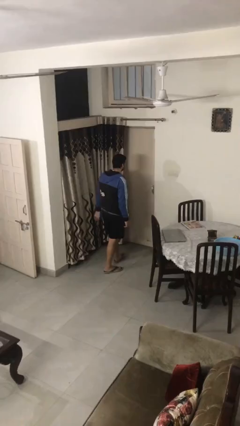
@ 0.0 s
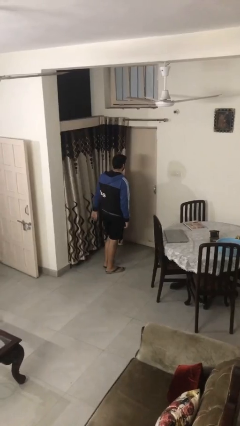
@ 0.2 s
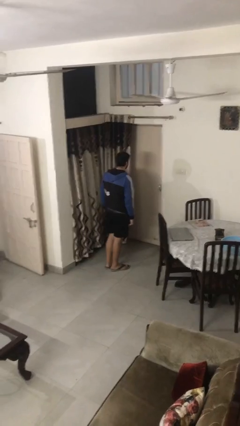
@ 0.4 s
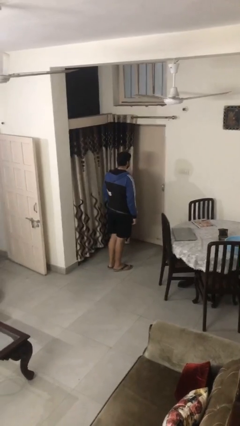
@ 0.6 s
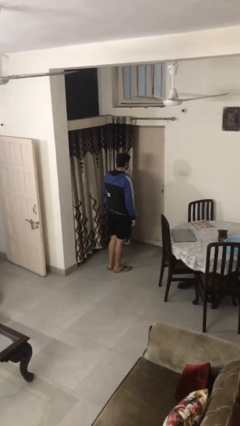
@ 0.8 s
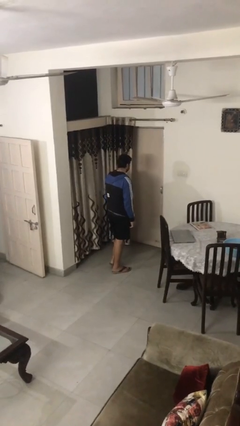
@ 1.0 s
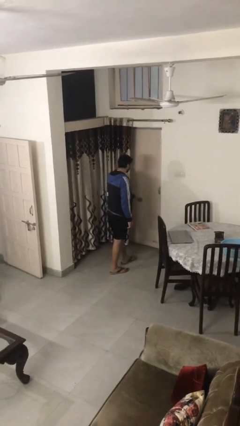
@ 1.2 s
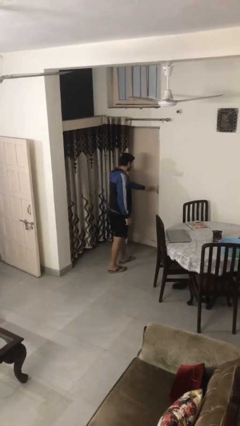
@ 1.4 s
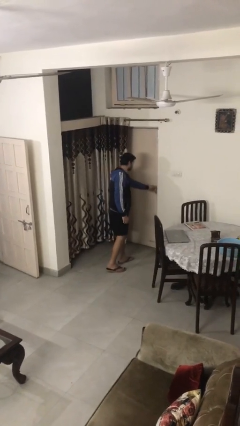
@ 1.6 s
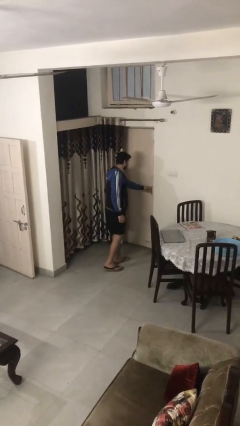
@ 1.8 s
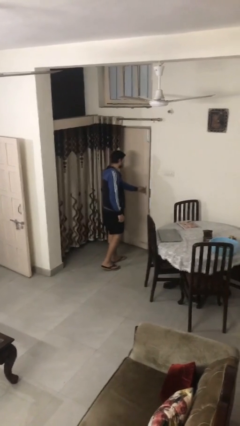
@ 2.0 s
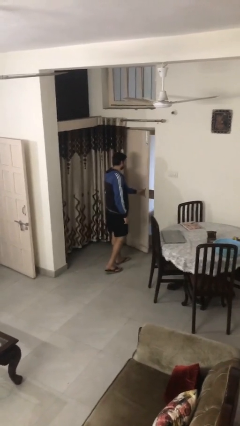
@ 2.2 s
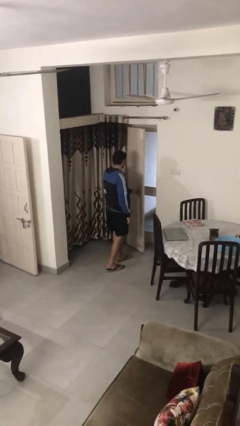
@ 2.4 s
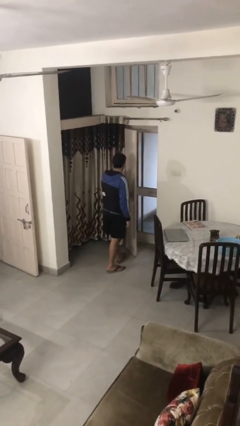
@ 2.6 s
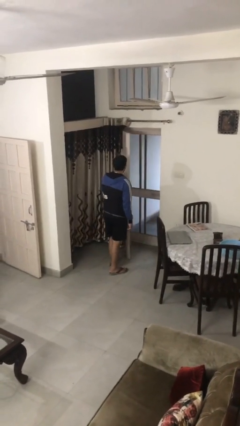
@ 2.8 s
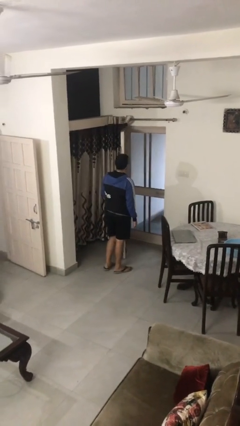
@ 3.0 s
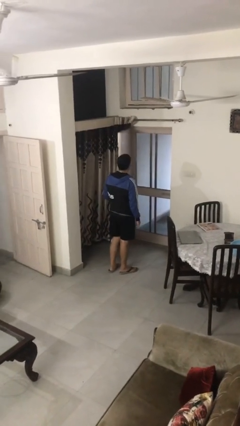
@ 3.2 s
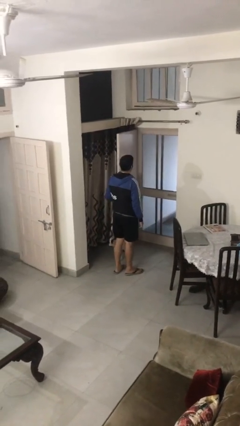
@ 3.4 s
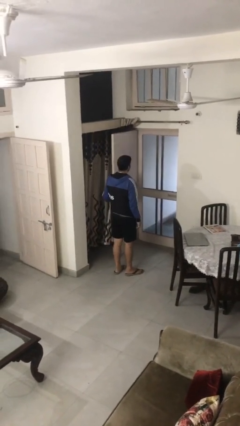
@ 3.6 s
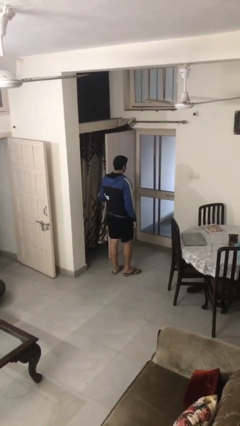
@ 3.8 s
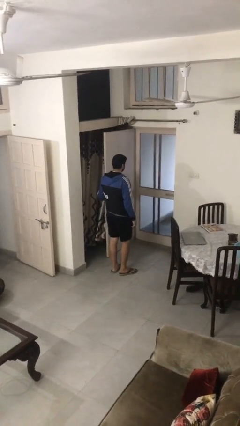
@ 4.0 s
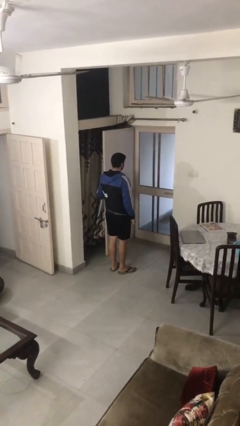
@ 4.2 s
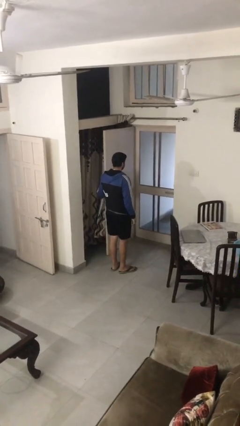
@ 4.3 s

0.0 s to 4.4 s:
person opens facility door

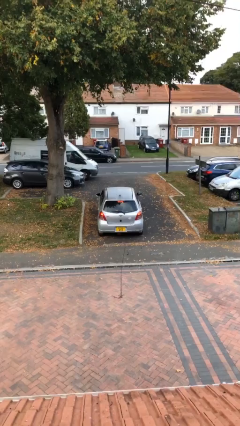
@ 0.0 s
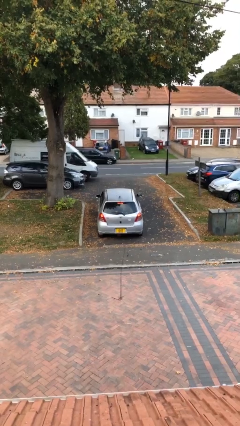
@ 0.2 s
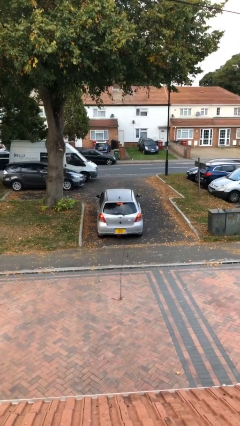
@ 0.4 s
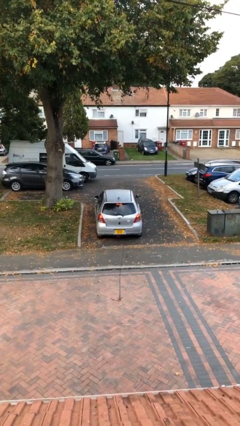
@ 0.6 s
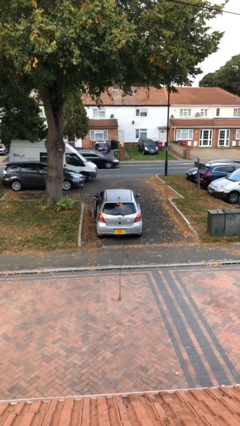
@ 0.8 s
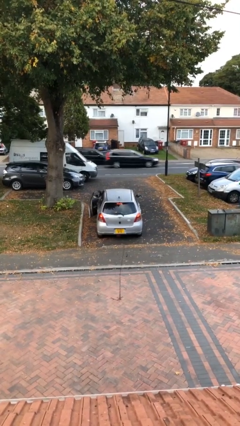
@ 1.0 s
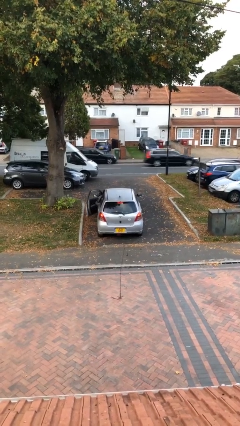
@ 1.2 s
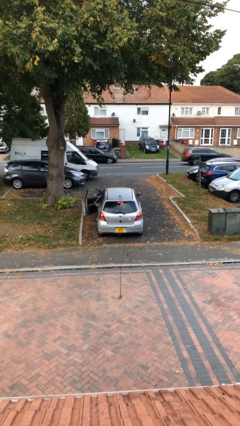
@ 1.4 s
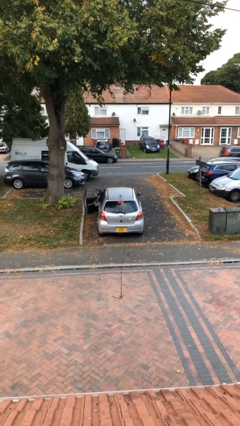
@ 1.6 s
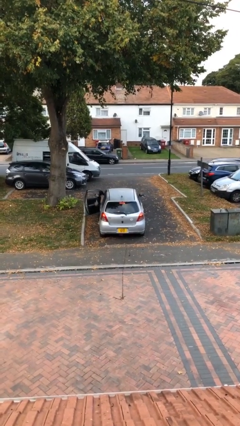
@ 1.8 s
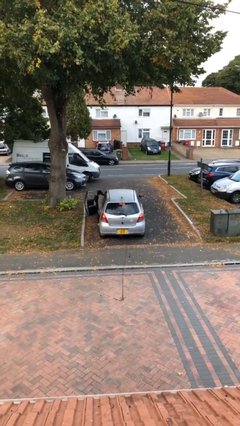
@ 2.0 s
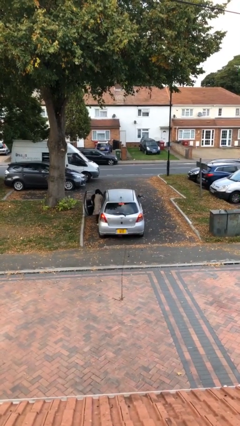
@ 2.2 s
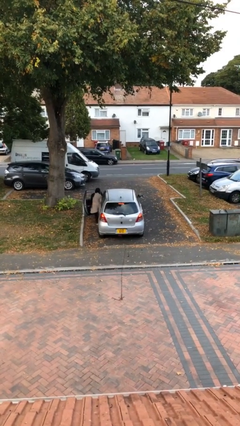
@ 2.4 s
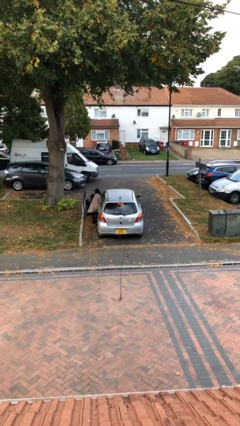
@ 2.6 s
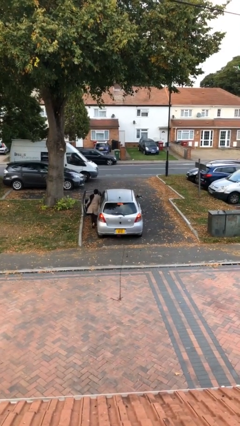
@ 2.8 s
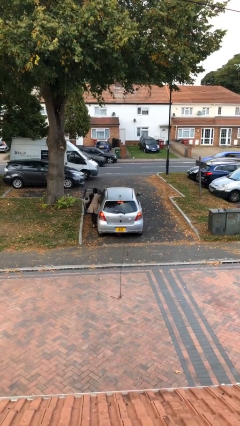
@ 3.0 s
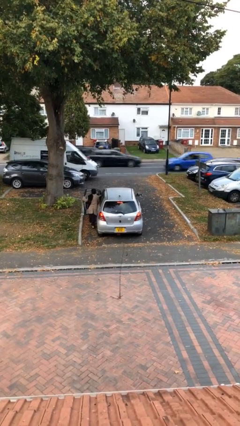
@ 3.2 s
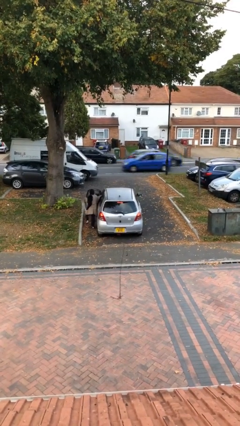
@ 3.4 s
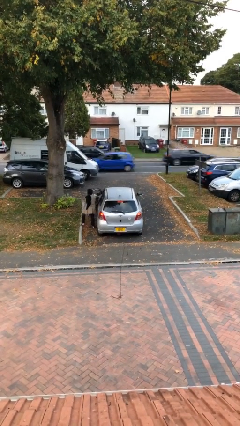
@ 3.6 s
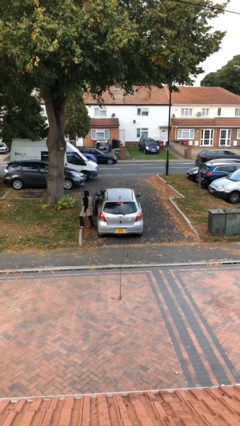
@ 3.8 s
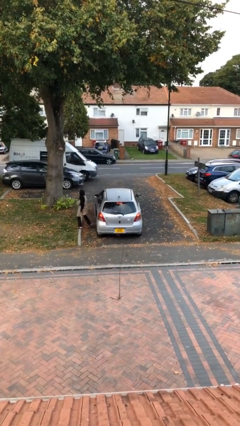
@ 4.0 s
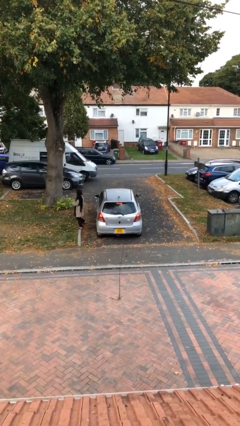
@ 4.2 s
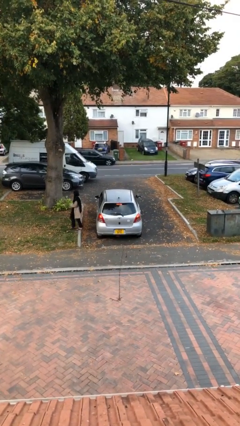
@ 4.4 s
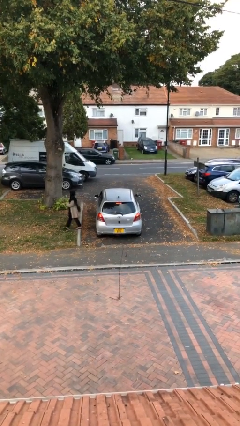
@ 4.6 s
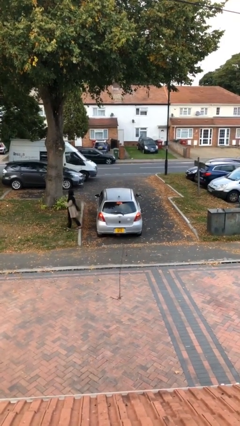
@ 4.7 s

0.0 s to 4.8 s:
car drops off person

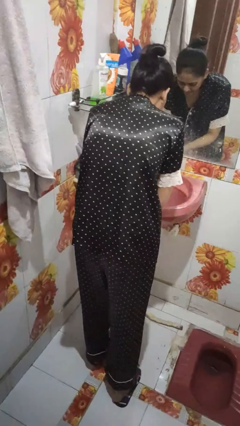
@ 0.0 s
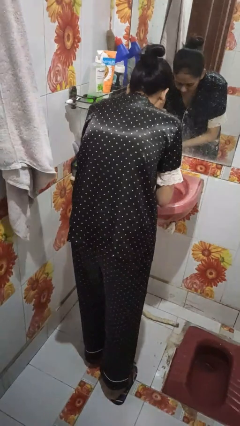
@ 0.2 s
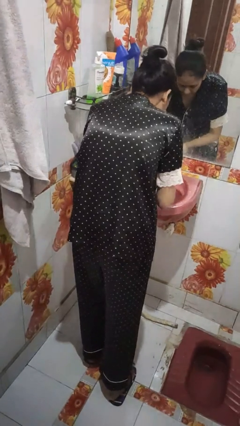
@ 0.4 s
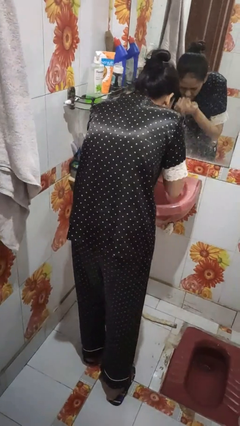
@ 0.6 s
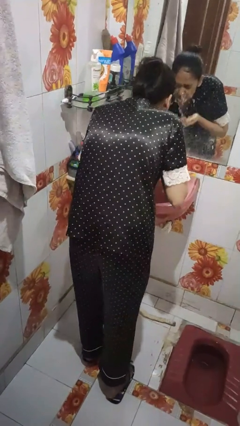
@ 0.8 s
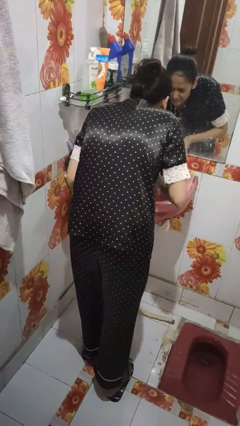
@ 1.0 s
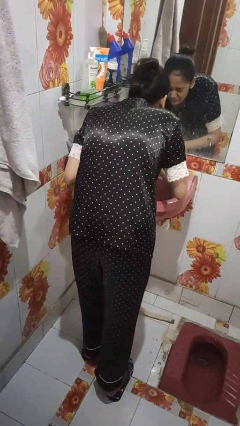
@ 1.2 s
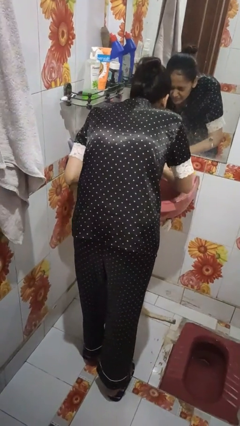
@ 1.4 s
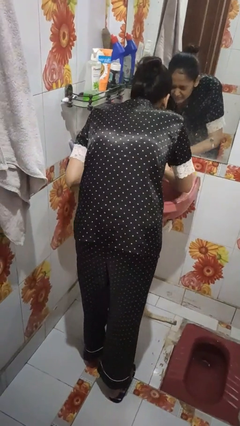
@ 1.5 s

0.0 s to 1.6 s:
person washes face

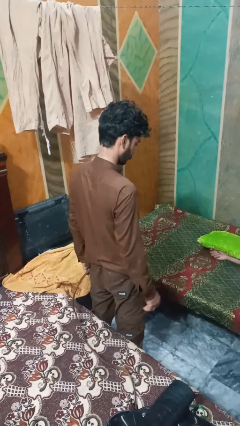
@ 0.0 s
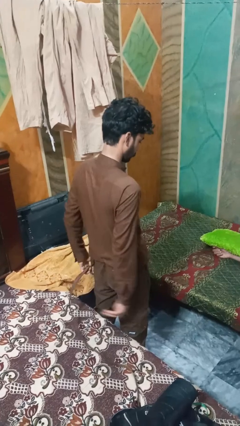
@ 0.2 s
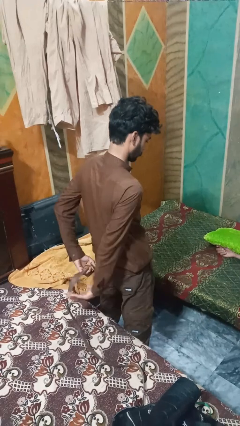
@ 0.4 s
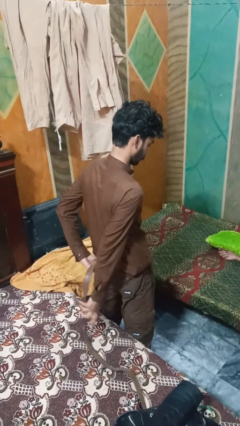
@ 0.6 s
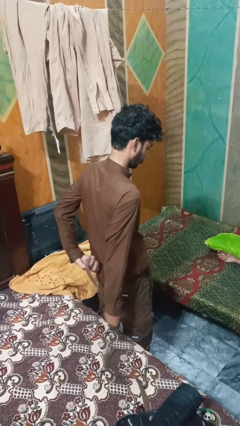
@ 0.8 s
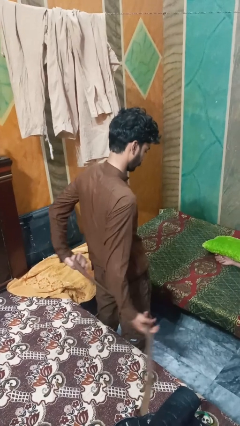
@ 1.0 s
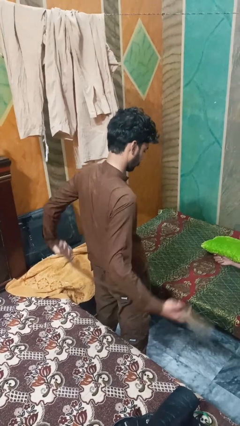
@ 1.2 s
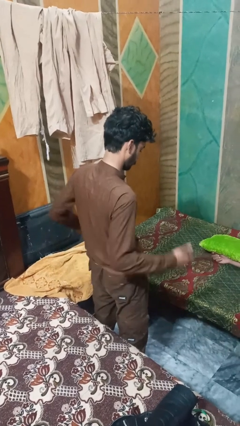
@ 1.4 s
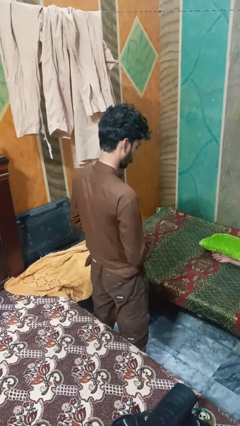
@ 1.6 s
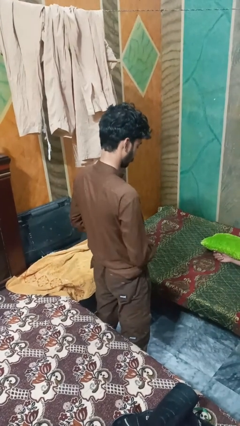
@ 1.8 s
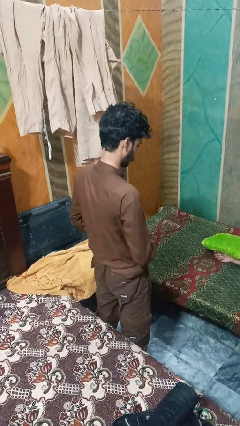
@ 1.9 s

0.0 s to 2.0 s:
person puts on belt

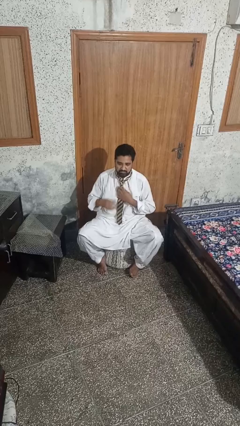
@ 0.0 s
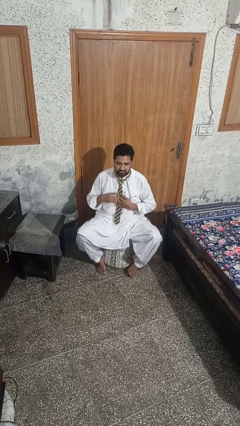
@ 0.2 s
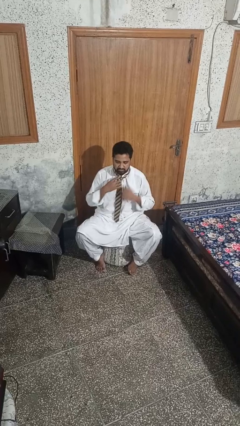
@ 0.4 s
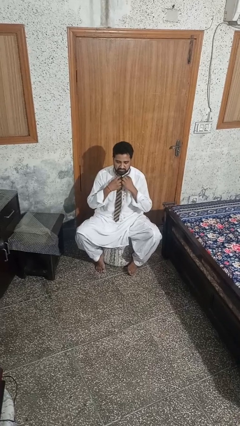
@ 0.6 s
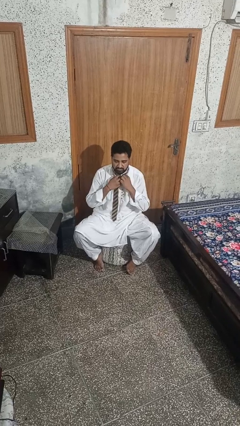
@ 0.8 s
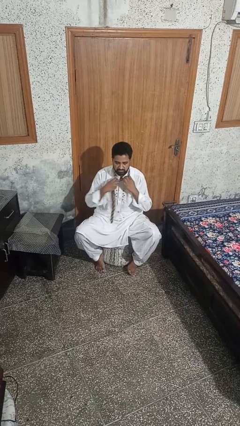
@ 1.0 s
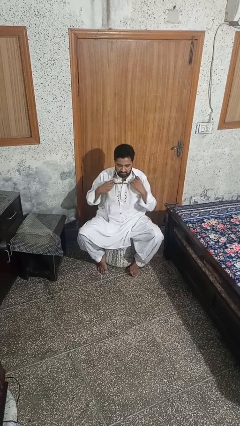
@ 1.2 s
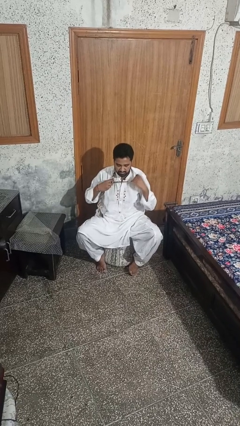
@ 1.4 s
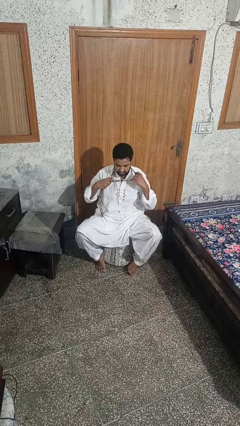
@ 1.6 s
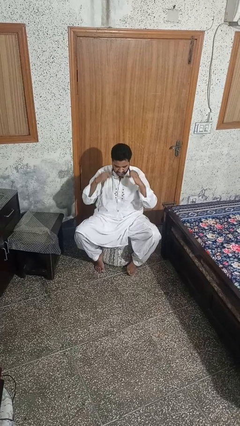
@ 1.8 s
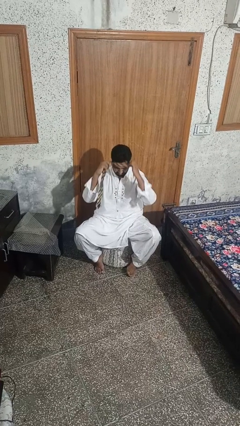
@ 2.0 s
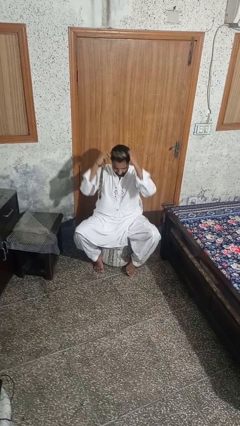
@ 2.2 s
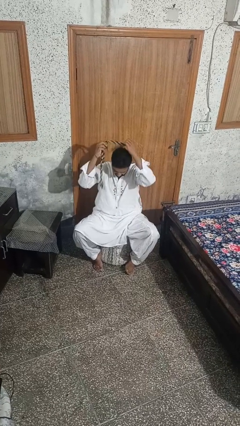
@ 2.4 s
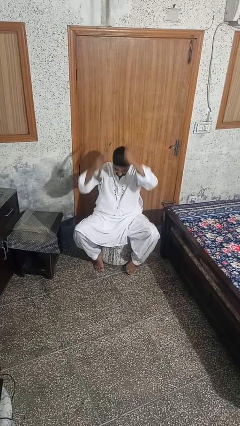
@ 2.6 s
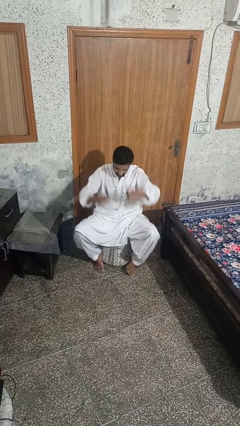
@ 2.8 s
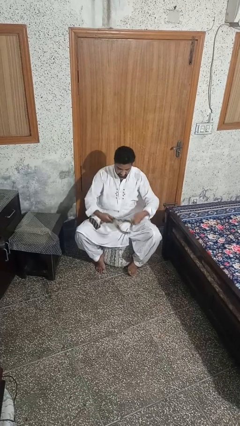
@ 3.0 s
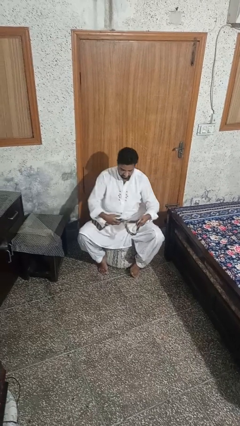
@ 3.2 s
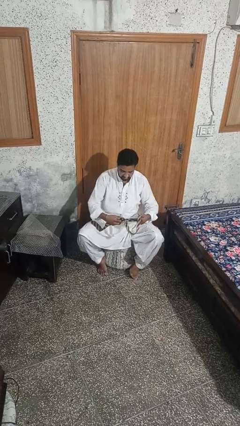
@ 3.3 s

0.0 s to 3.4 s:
person takes off necktie

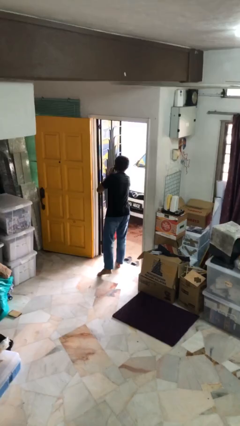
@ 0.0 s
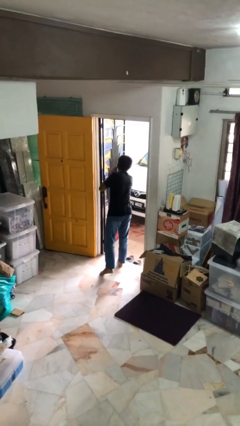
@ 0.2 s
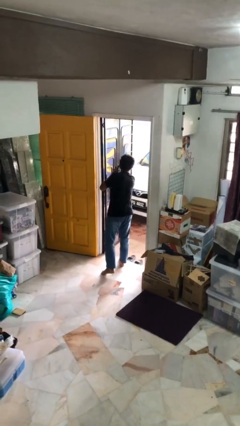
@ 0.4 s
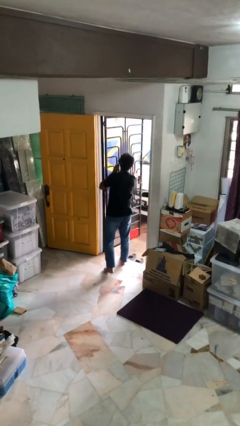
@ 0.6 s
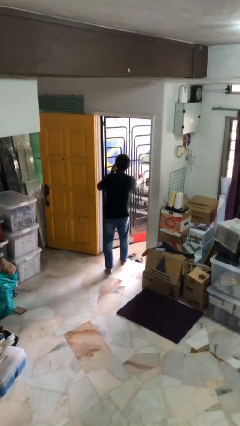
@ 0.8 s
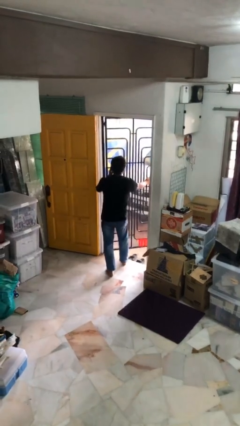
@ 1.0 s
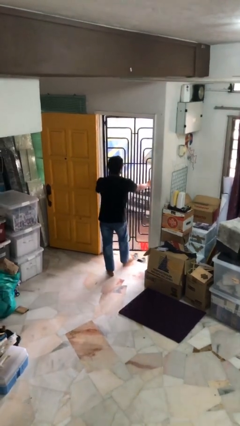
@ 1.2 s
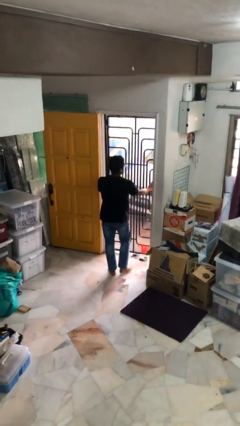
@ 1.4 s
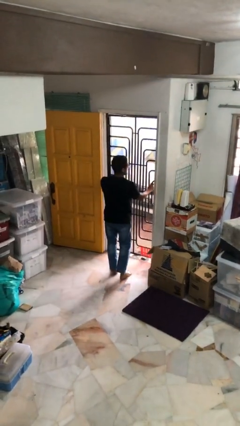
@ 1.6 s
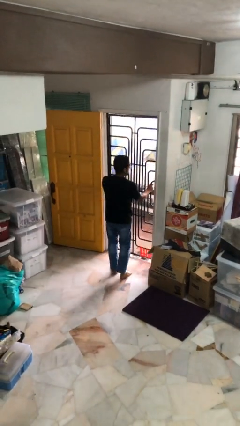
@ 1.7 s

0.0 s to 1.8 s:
person closes facility door
